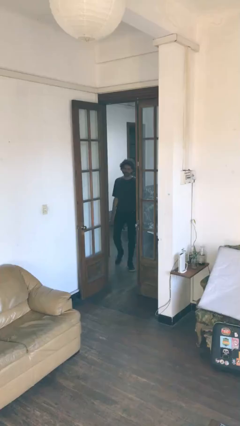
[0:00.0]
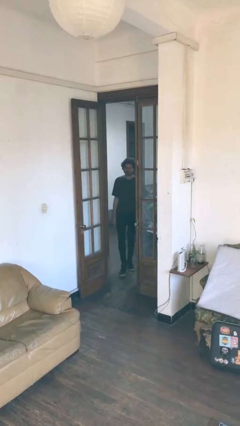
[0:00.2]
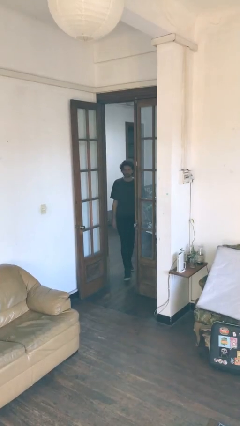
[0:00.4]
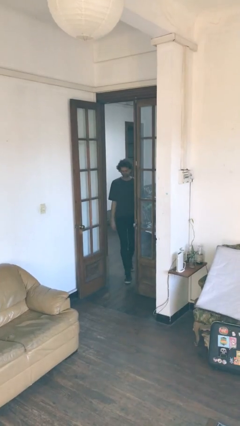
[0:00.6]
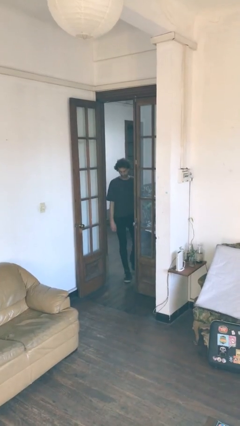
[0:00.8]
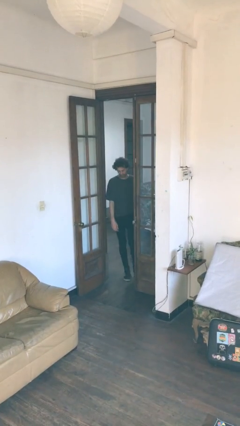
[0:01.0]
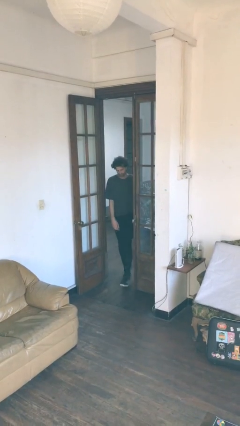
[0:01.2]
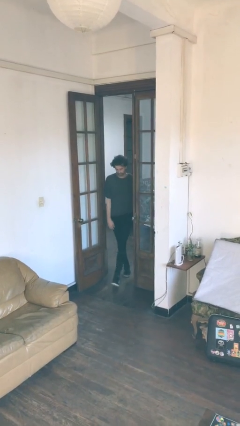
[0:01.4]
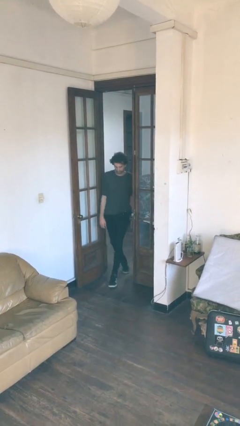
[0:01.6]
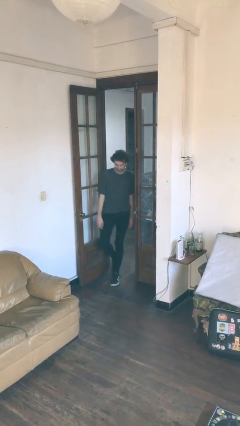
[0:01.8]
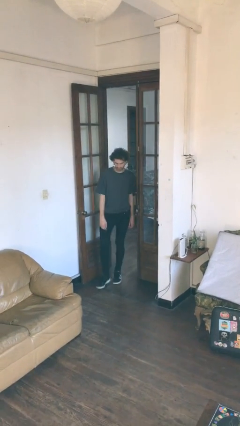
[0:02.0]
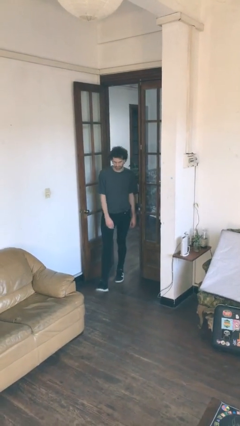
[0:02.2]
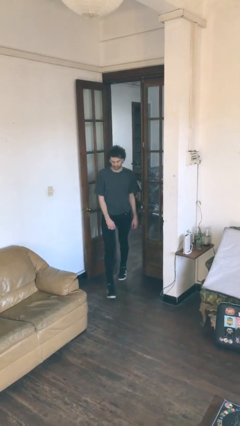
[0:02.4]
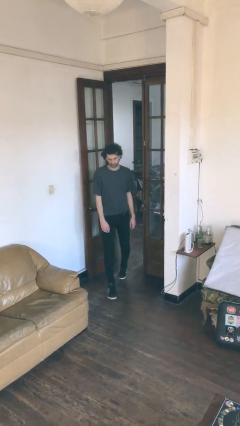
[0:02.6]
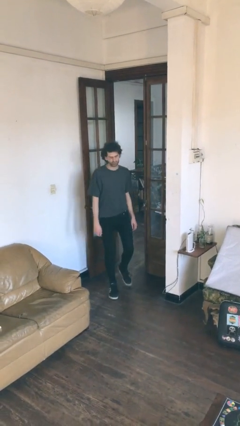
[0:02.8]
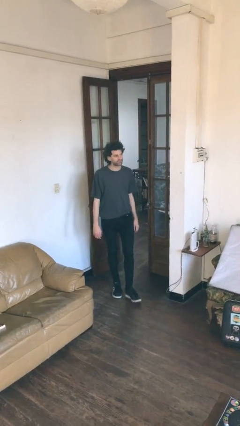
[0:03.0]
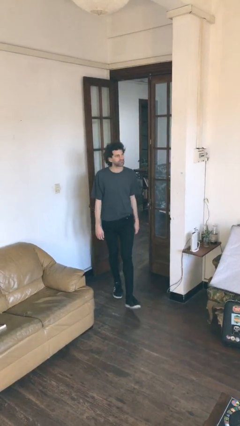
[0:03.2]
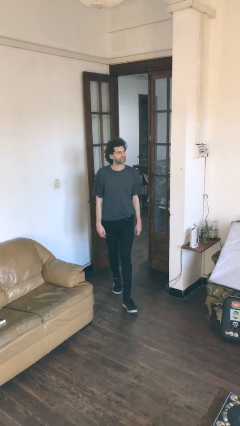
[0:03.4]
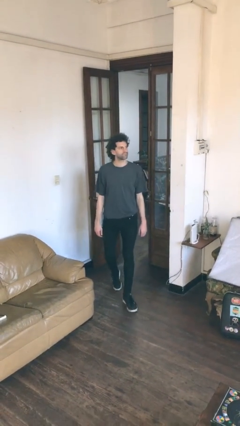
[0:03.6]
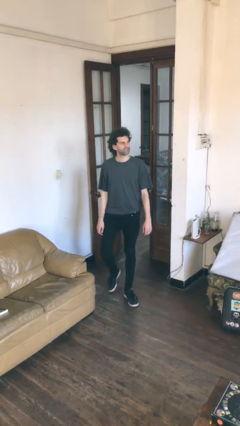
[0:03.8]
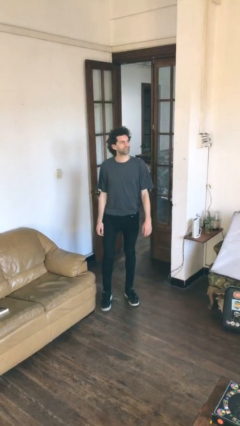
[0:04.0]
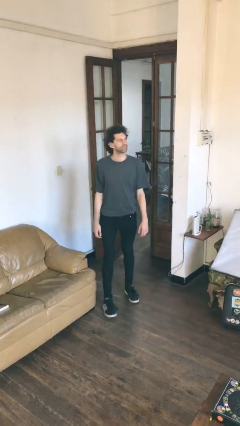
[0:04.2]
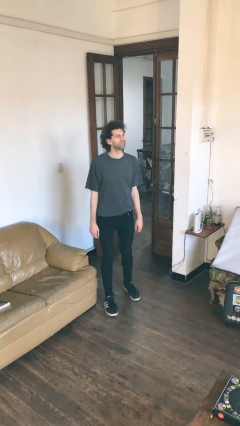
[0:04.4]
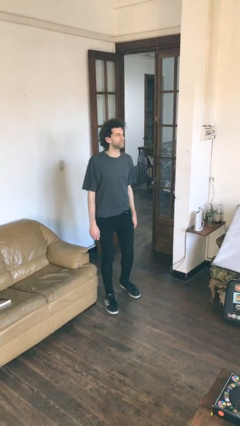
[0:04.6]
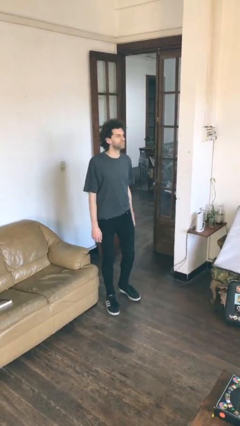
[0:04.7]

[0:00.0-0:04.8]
person enters scene through structure

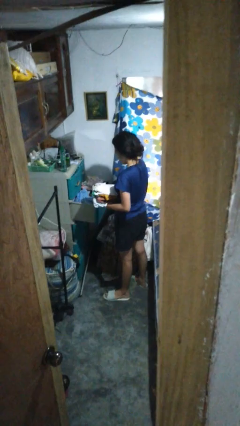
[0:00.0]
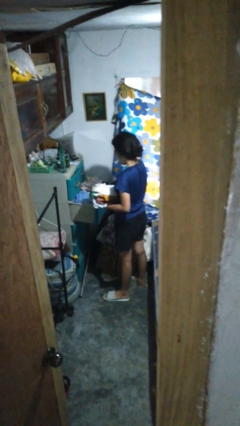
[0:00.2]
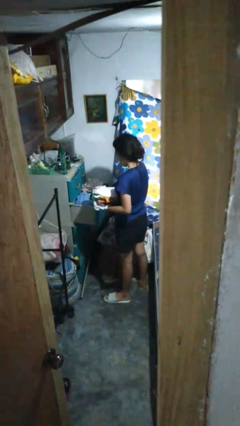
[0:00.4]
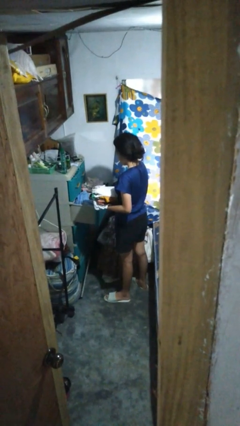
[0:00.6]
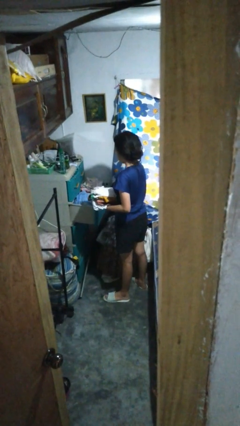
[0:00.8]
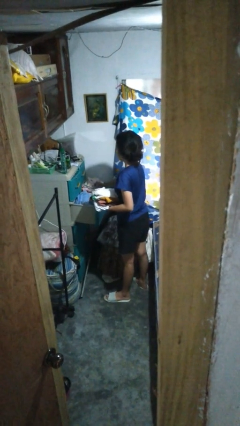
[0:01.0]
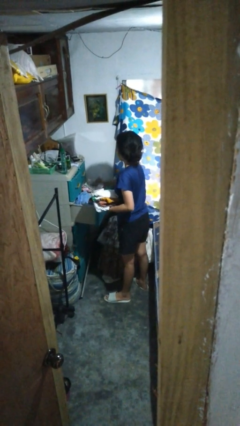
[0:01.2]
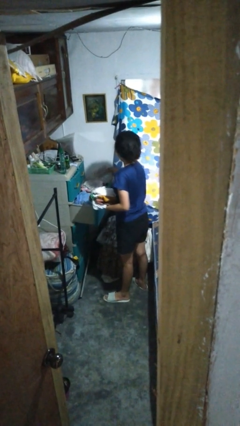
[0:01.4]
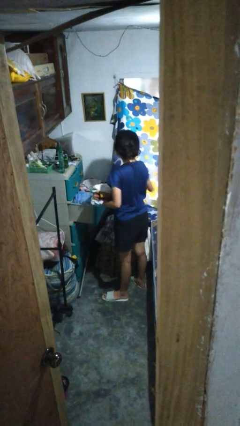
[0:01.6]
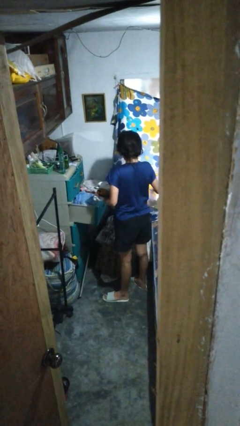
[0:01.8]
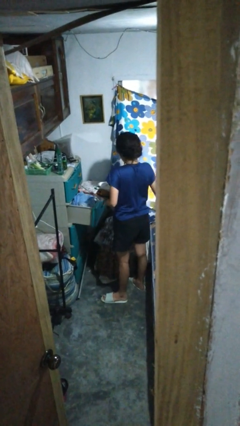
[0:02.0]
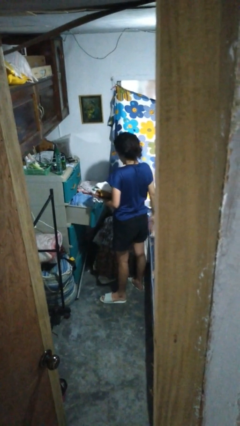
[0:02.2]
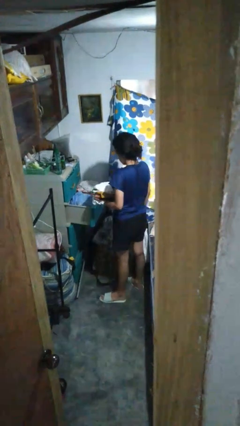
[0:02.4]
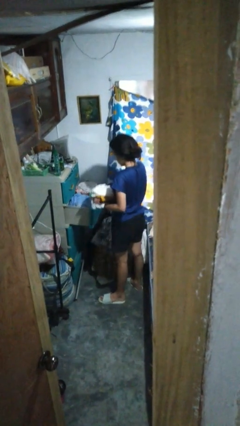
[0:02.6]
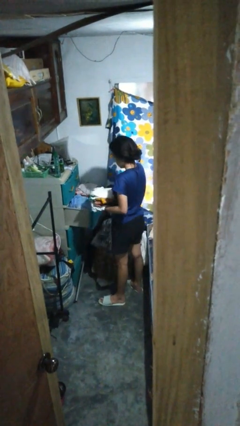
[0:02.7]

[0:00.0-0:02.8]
person takes clothes from dresser

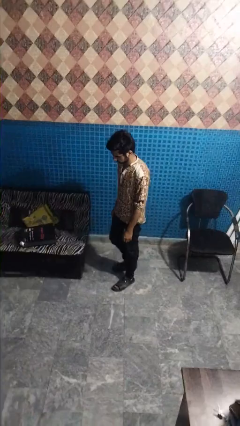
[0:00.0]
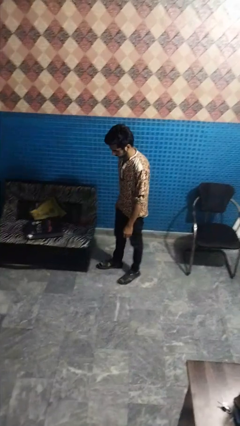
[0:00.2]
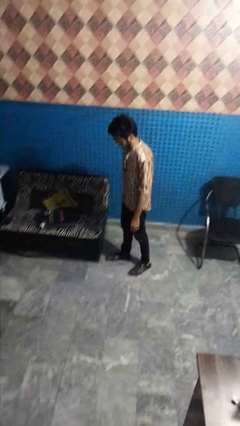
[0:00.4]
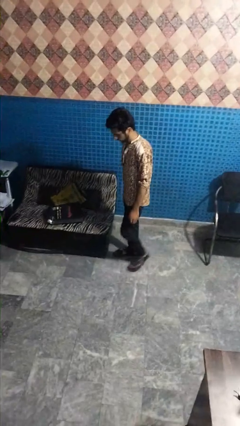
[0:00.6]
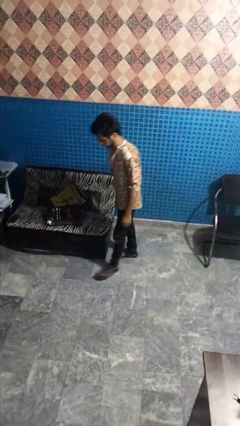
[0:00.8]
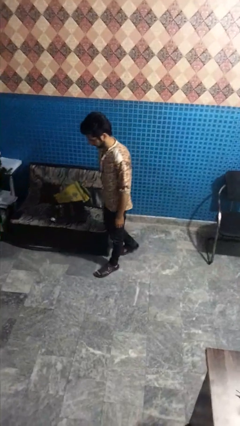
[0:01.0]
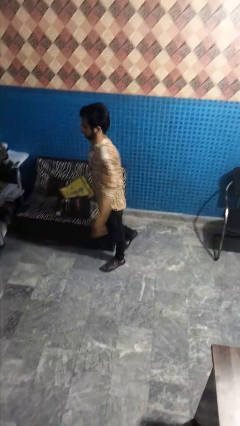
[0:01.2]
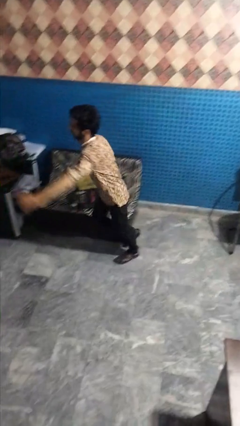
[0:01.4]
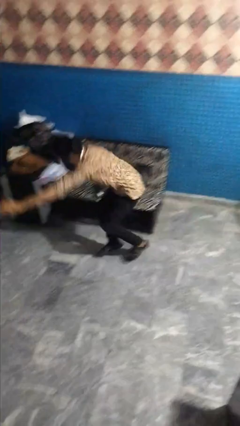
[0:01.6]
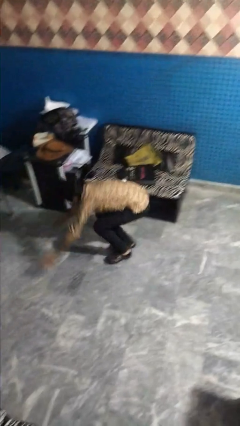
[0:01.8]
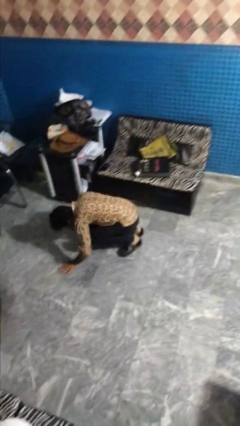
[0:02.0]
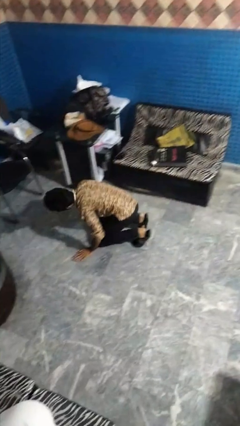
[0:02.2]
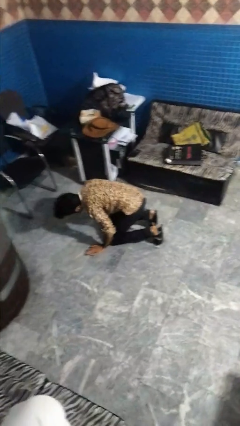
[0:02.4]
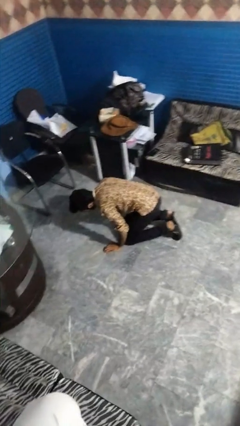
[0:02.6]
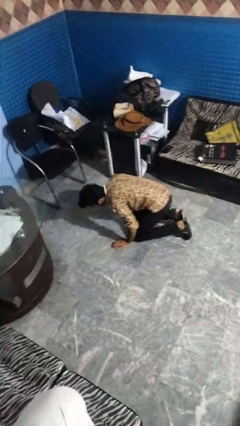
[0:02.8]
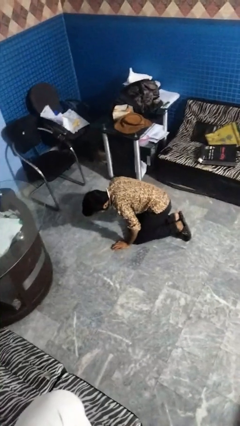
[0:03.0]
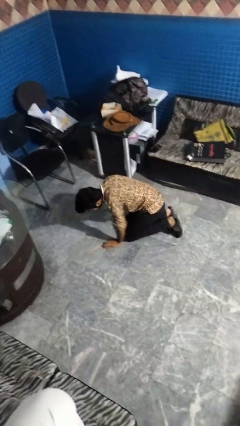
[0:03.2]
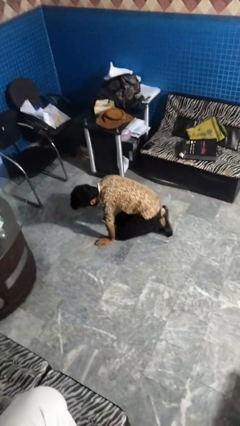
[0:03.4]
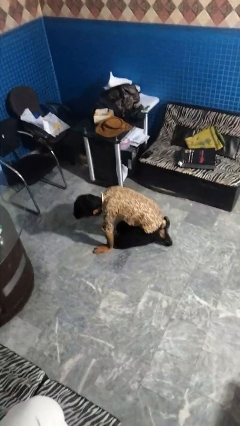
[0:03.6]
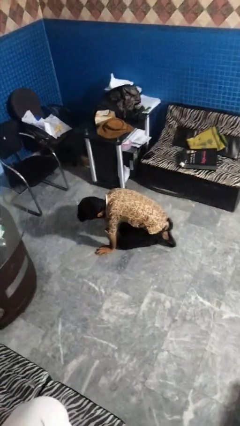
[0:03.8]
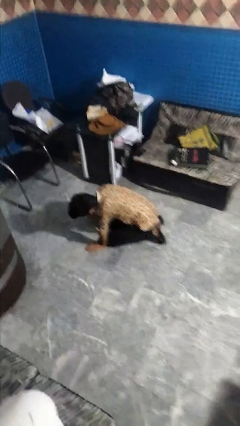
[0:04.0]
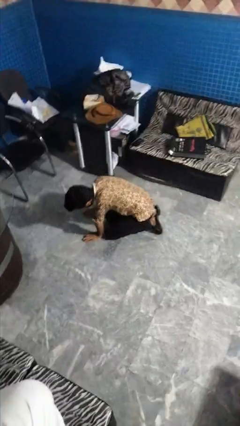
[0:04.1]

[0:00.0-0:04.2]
person trips on object on floor

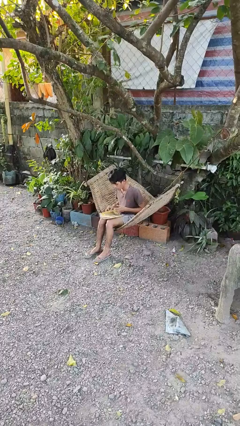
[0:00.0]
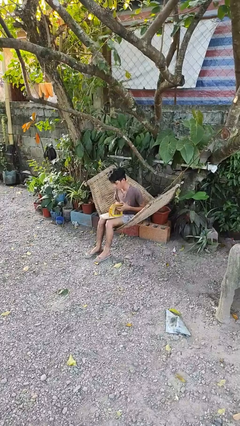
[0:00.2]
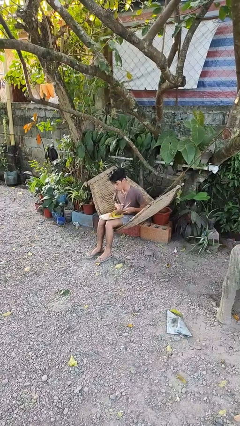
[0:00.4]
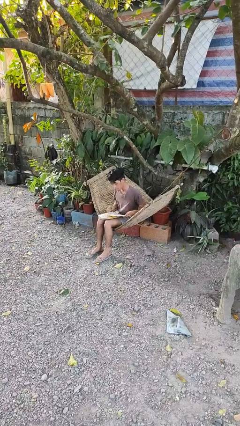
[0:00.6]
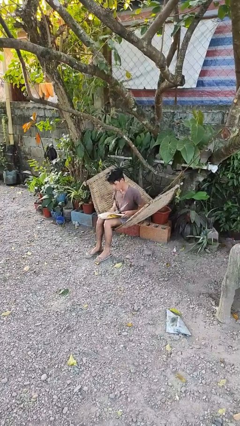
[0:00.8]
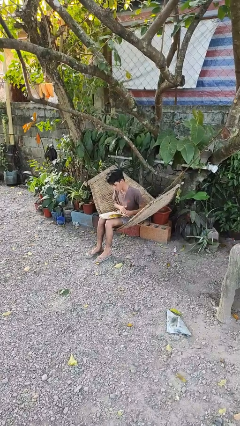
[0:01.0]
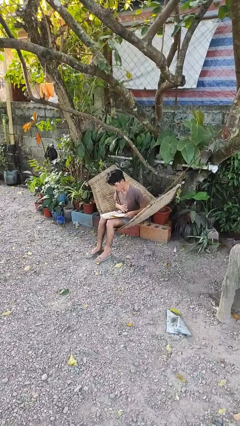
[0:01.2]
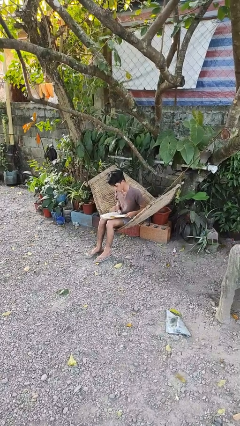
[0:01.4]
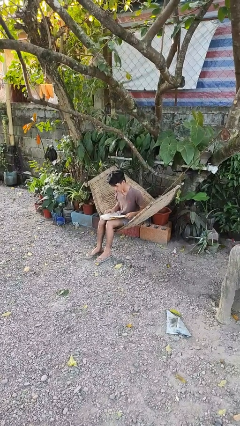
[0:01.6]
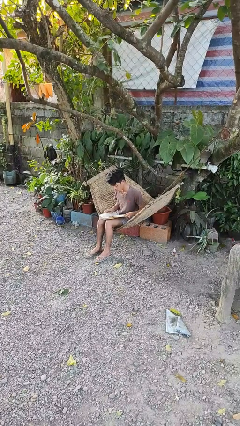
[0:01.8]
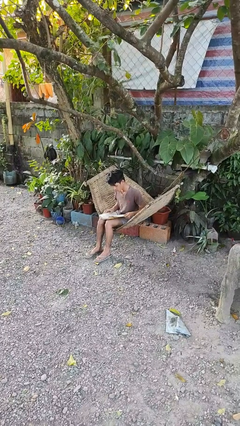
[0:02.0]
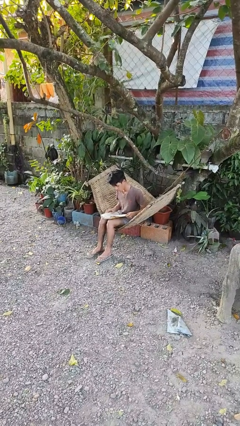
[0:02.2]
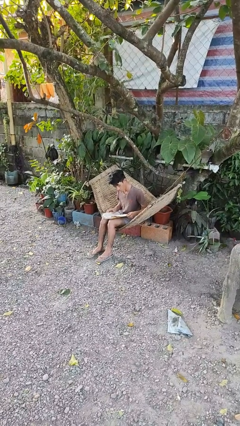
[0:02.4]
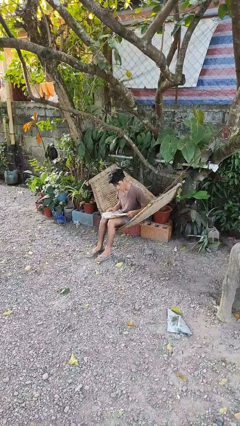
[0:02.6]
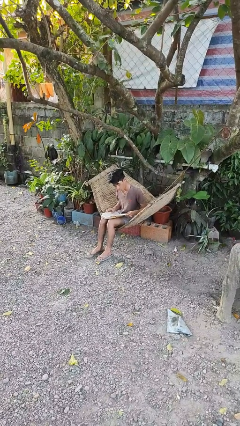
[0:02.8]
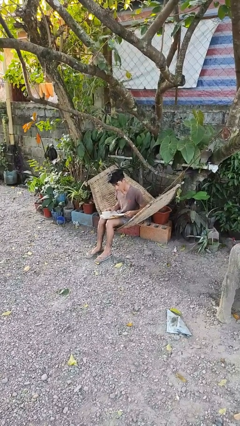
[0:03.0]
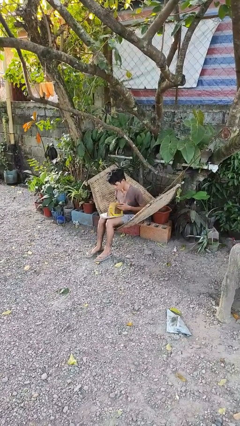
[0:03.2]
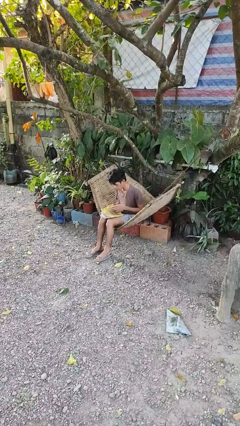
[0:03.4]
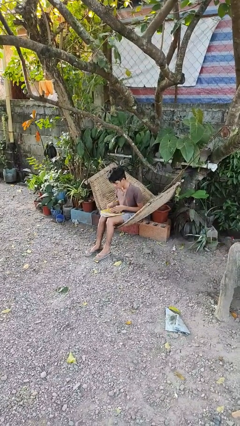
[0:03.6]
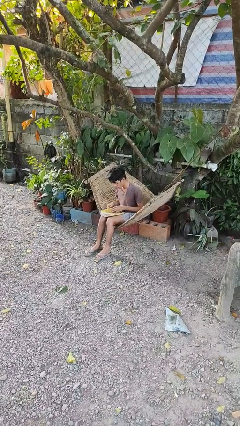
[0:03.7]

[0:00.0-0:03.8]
person reads book

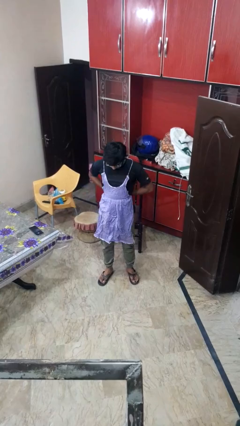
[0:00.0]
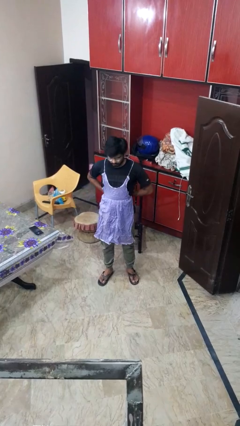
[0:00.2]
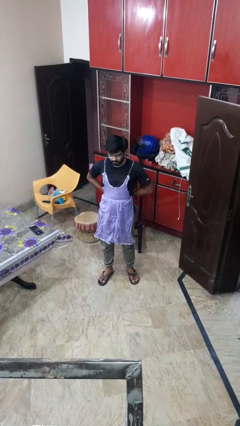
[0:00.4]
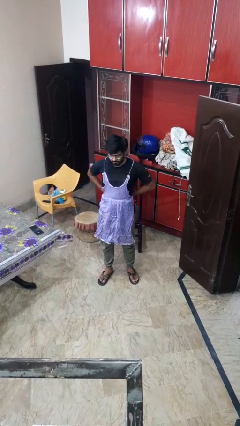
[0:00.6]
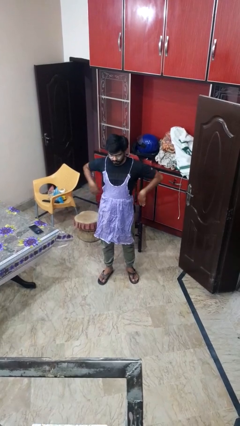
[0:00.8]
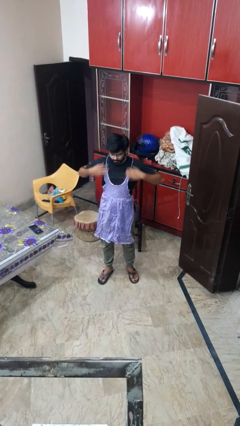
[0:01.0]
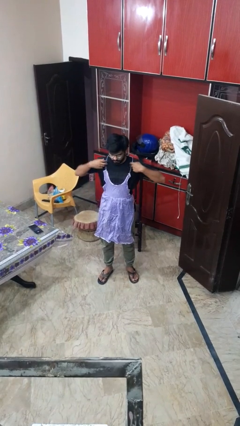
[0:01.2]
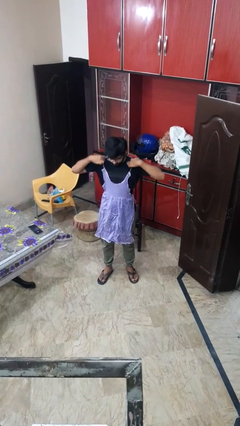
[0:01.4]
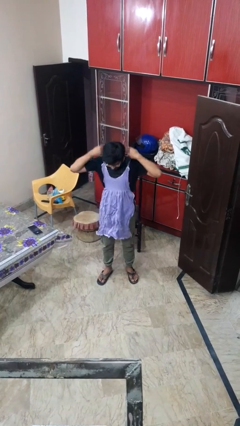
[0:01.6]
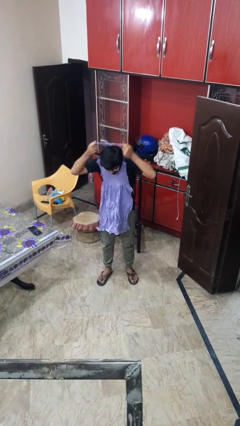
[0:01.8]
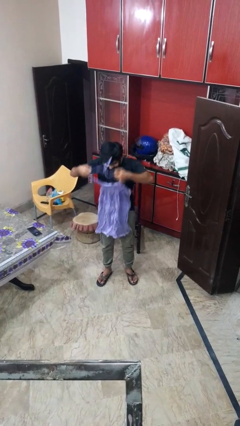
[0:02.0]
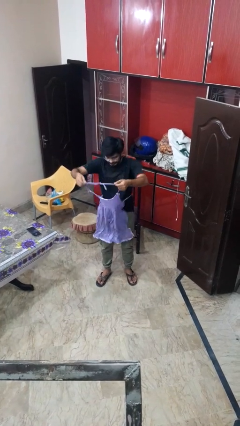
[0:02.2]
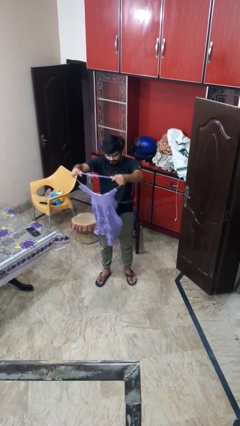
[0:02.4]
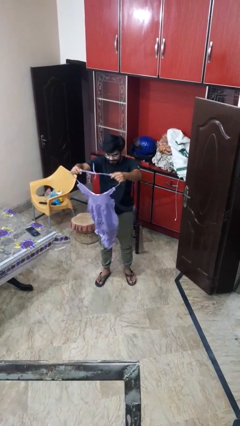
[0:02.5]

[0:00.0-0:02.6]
person takes off apron
